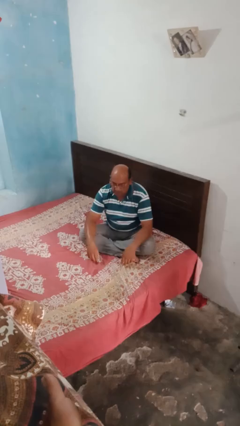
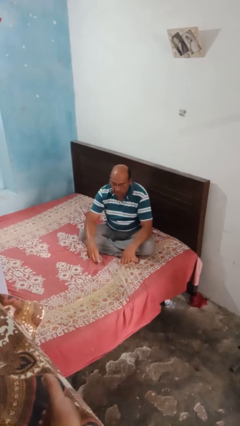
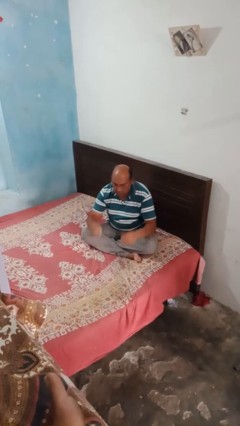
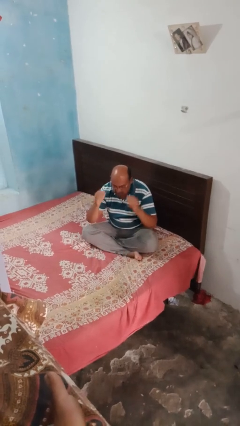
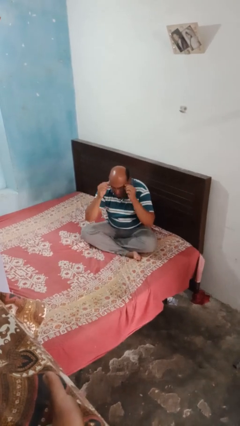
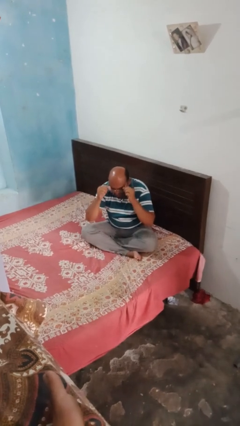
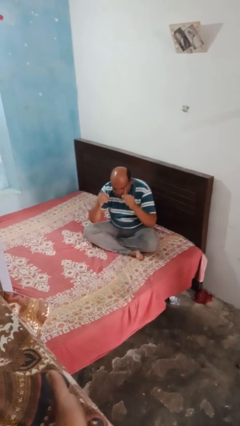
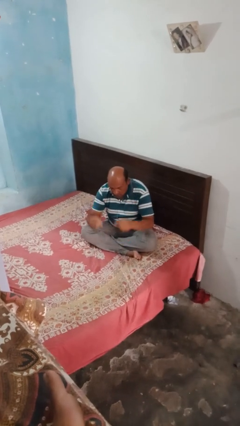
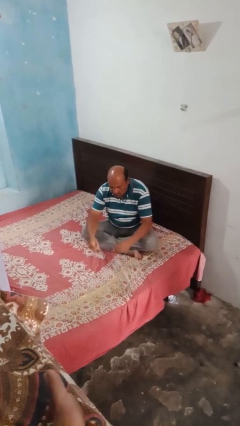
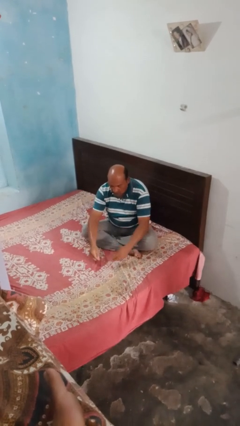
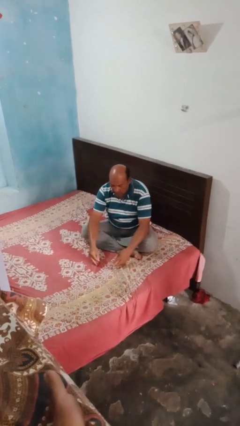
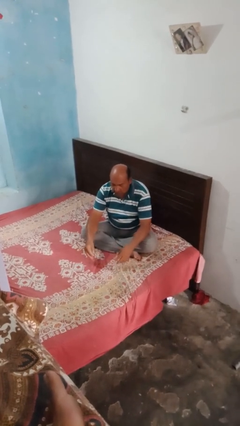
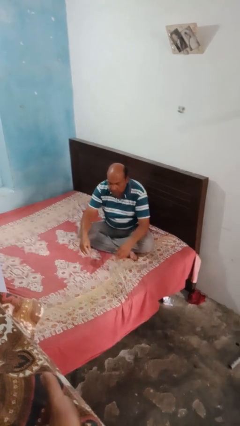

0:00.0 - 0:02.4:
person takes off glasses

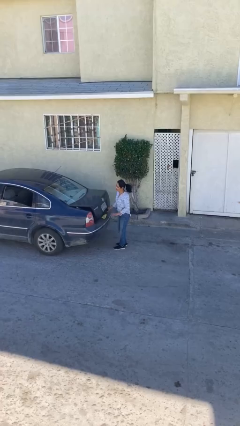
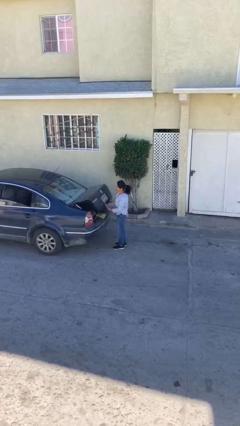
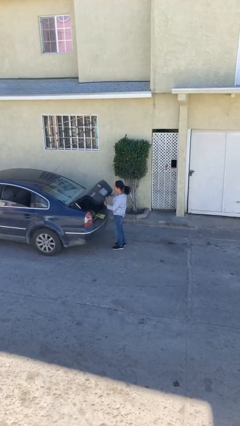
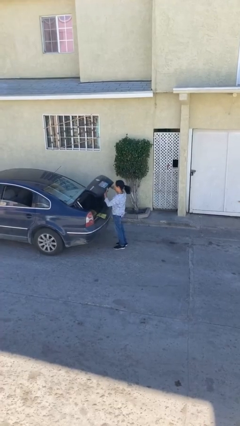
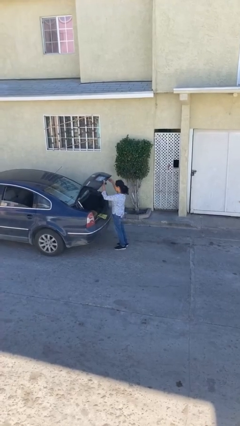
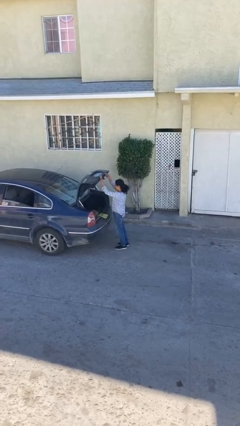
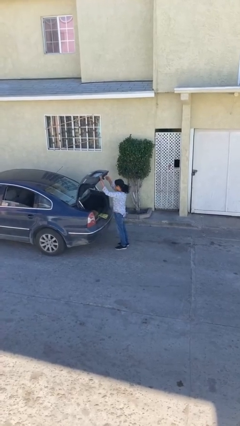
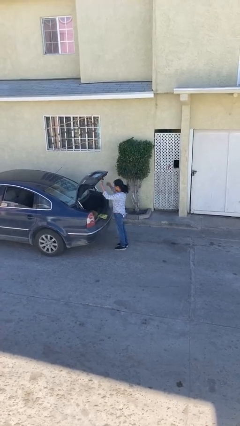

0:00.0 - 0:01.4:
person opens car trunk

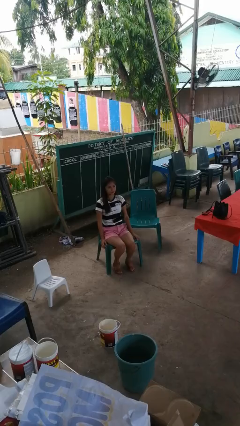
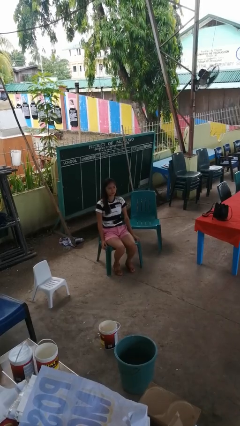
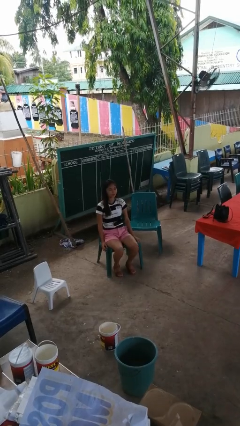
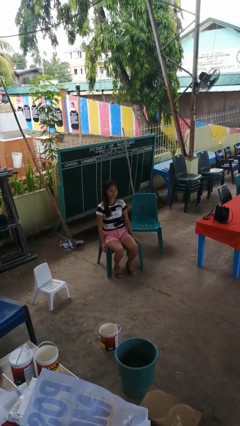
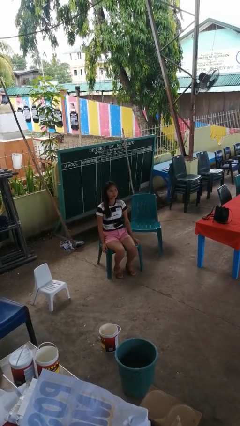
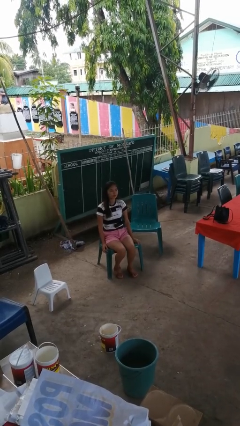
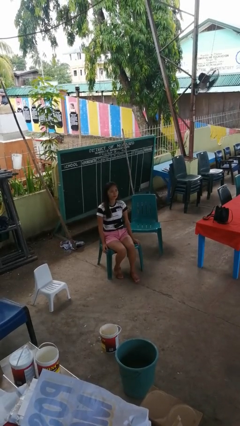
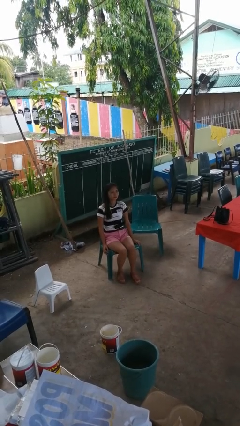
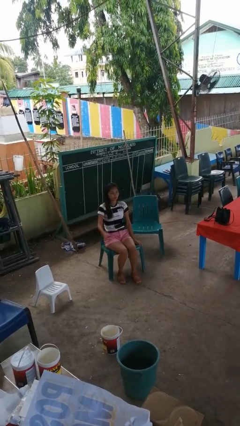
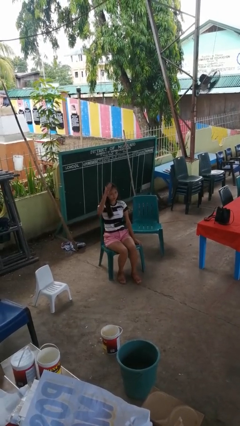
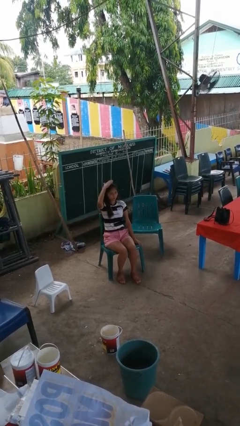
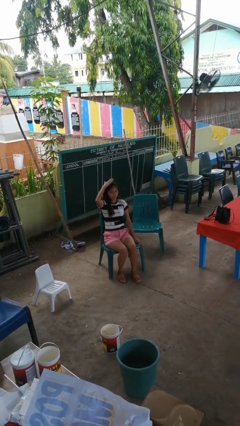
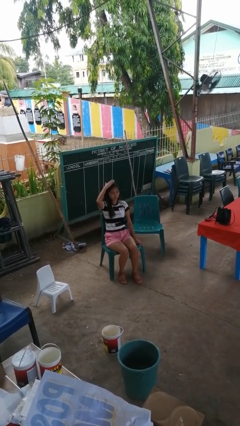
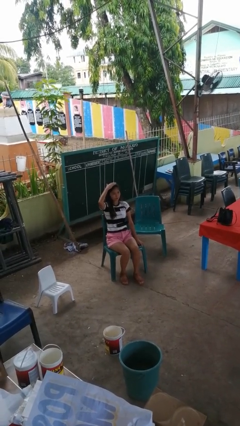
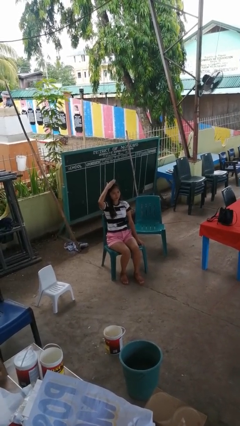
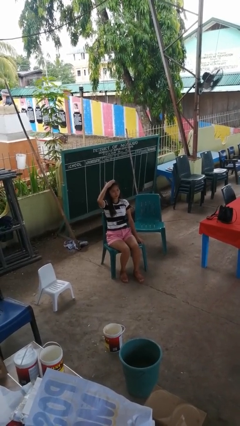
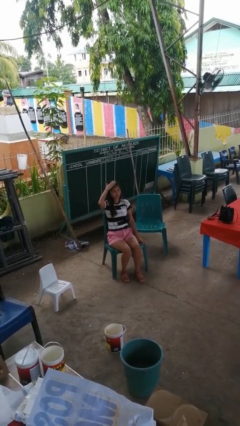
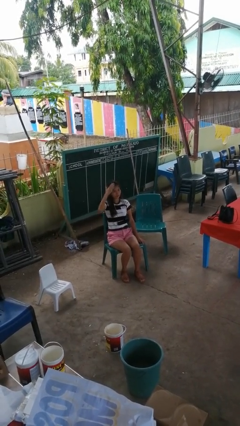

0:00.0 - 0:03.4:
person pats head

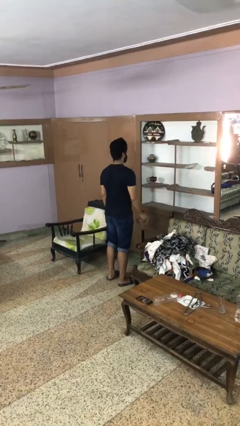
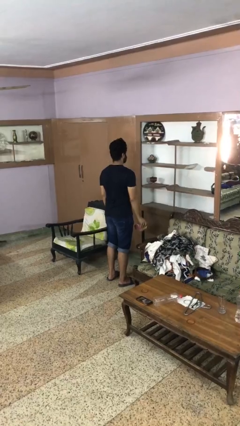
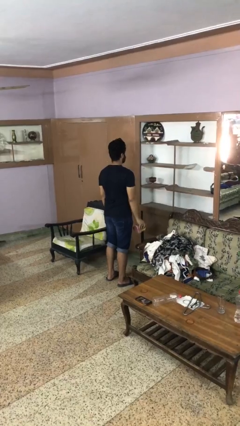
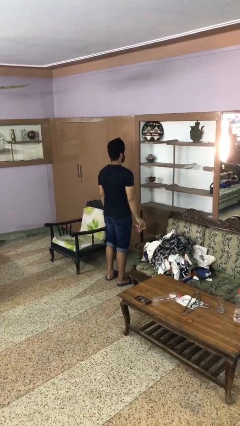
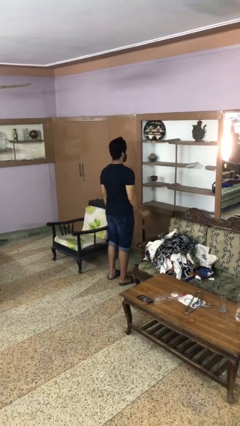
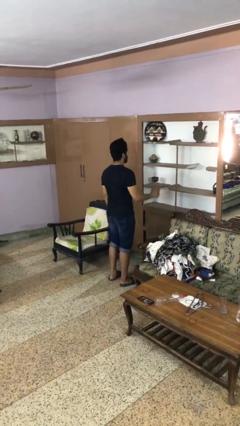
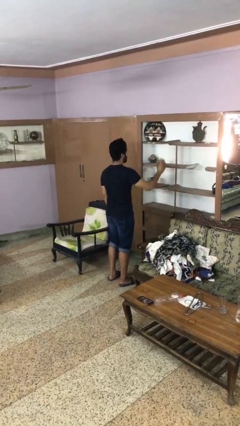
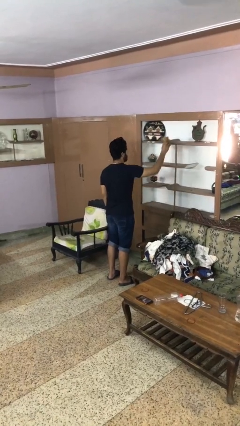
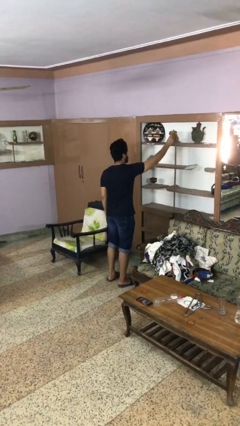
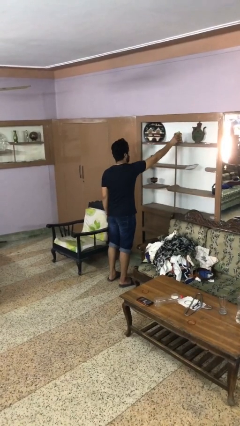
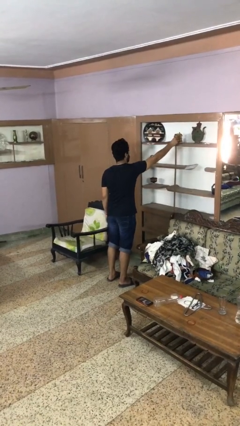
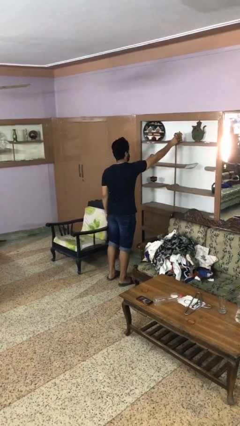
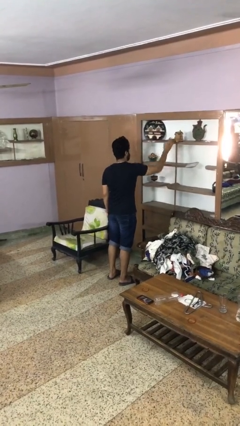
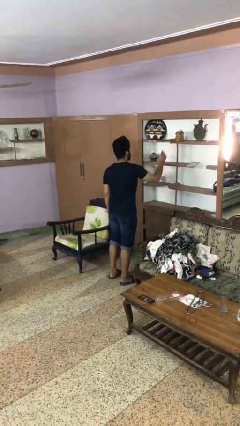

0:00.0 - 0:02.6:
person puts down object on shelf

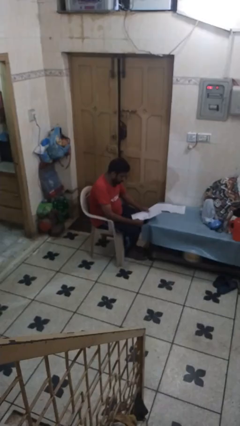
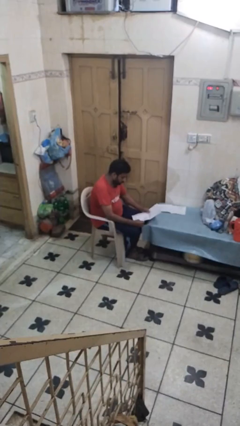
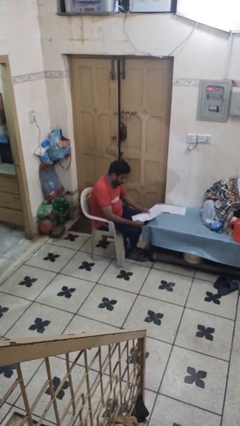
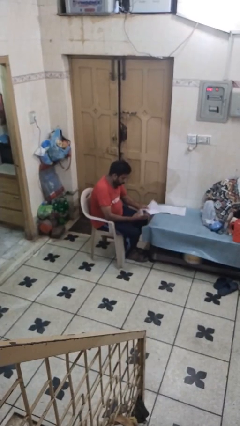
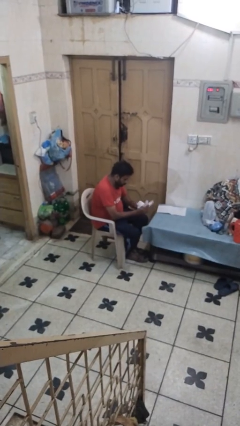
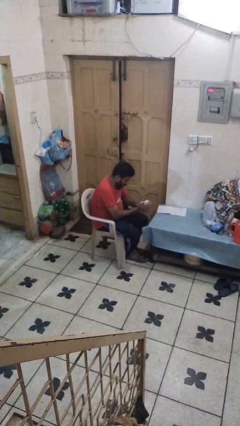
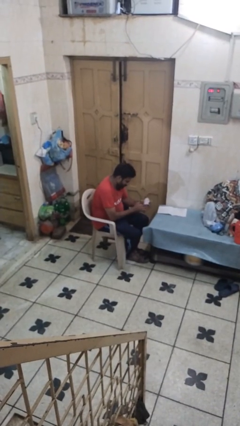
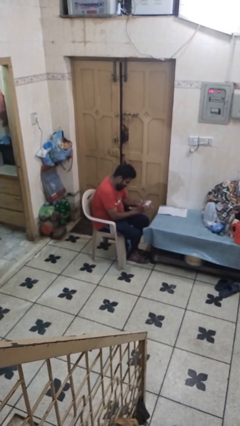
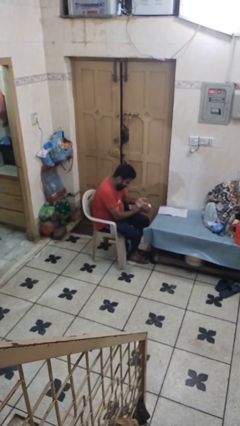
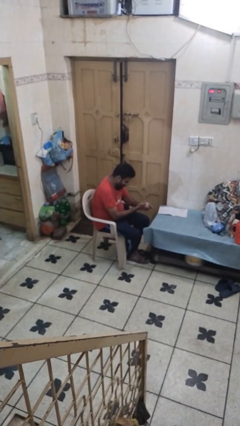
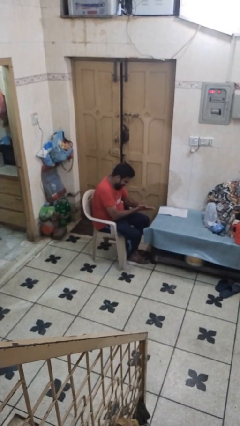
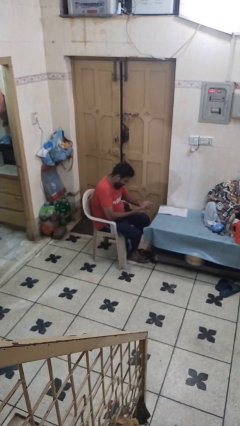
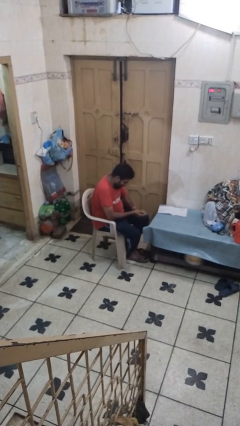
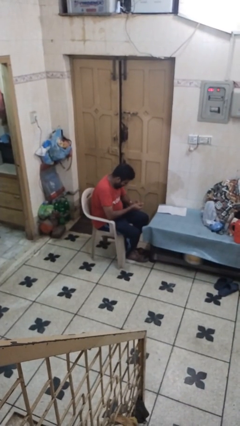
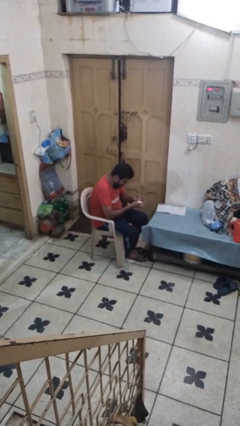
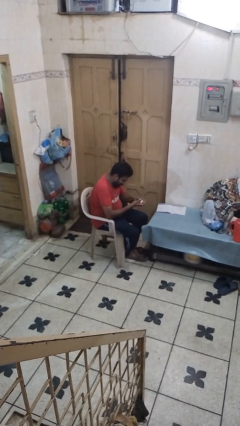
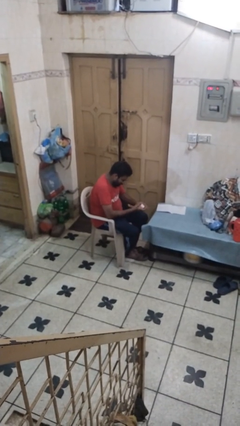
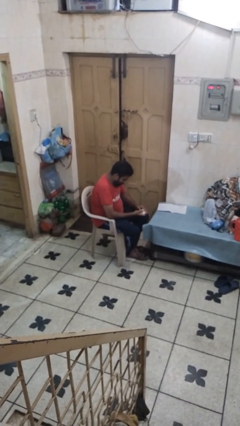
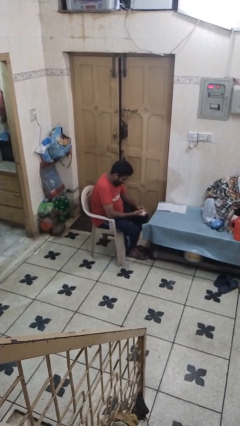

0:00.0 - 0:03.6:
person crumples paper

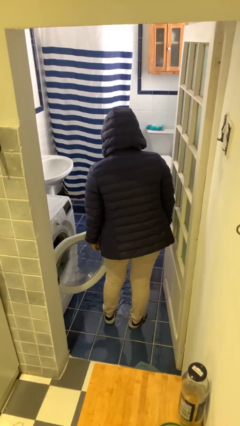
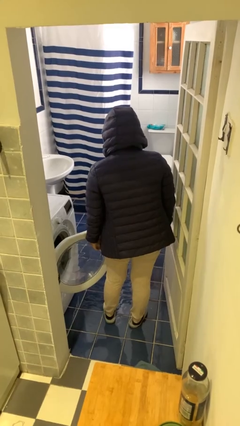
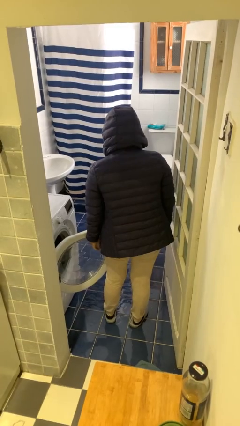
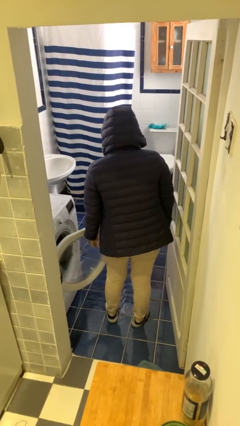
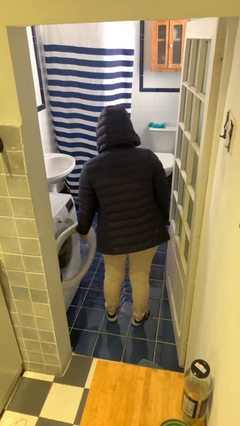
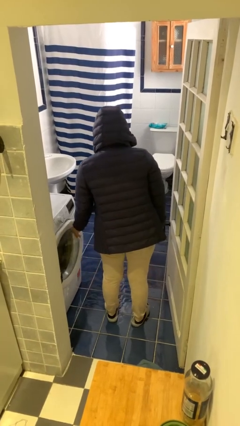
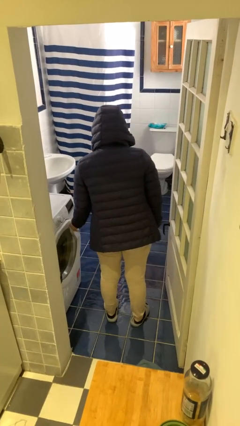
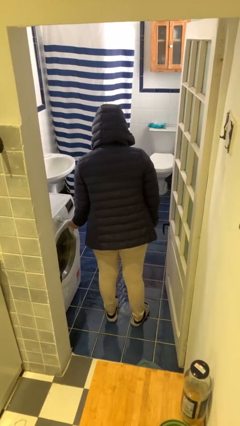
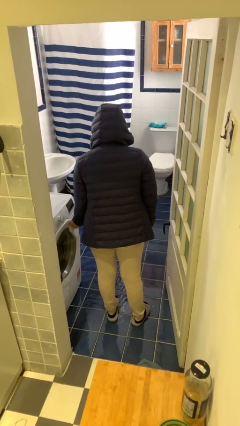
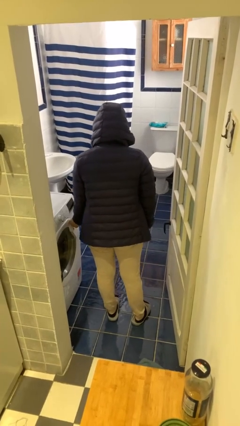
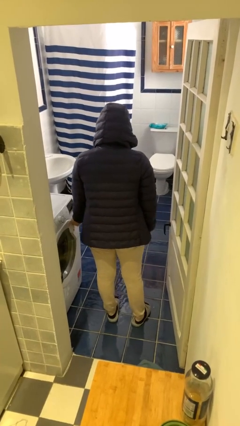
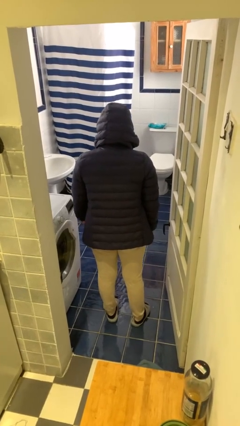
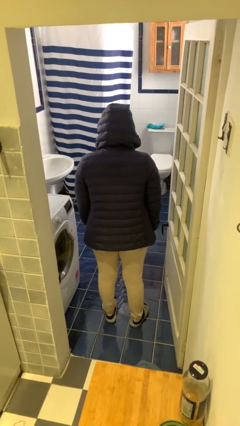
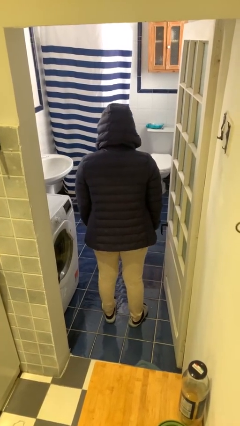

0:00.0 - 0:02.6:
person closes clothes washer

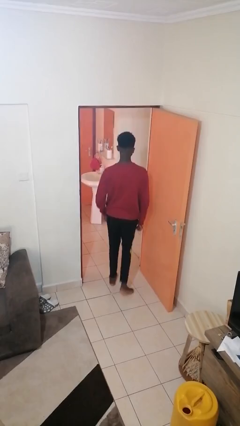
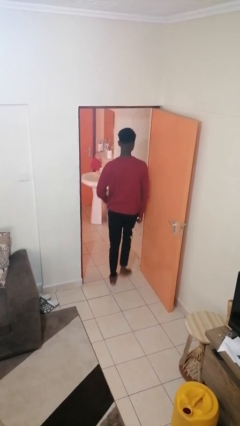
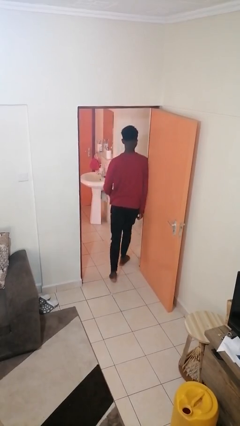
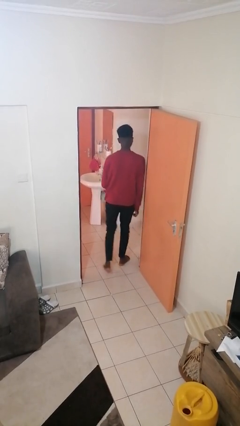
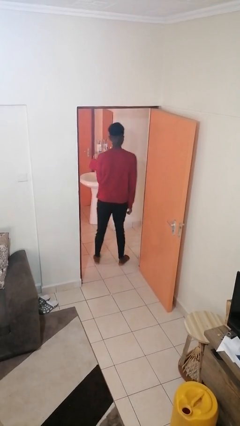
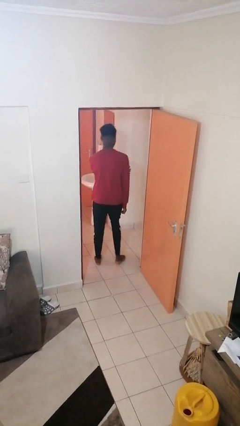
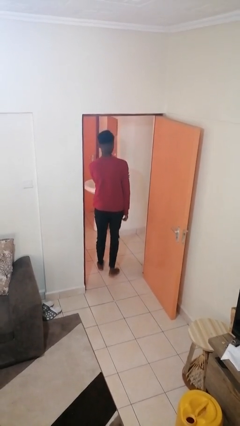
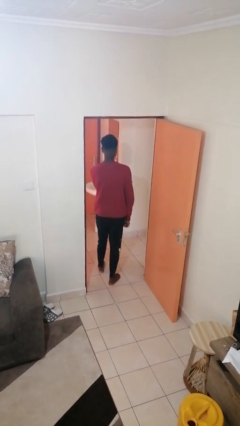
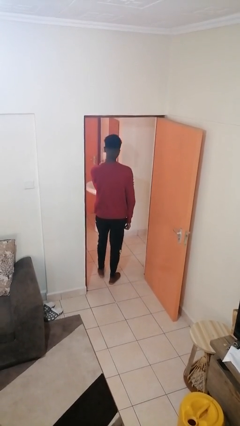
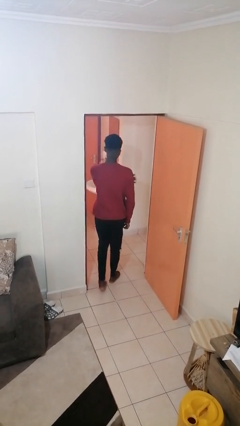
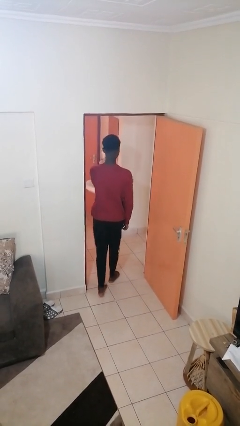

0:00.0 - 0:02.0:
person bumps into wall
